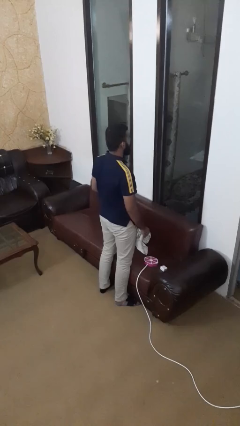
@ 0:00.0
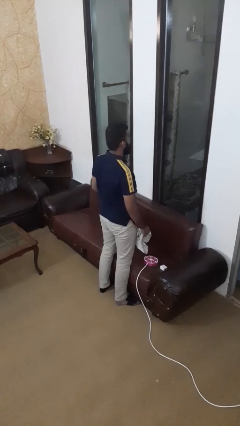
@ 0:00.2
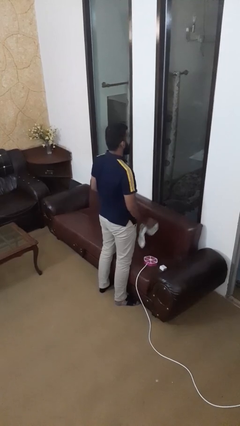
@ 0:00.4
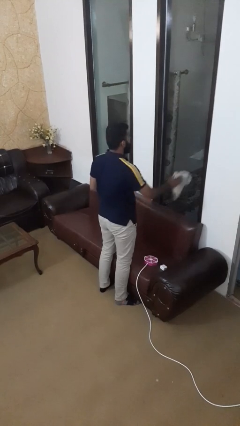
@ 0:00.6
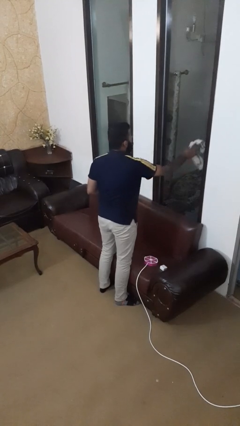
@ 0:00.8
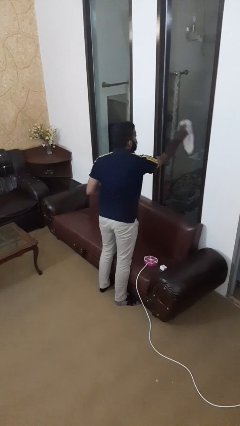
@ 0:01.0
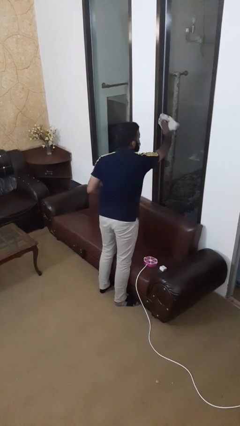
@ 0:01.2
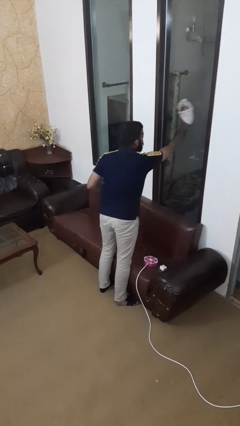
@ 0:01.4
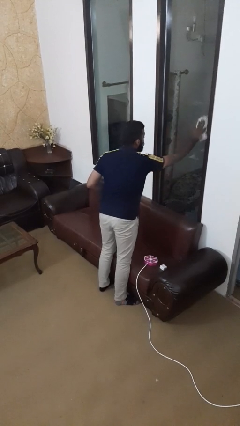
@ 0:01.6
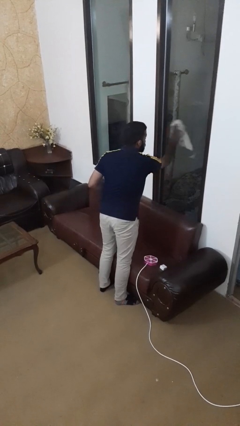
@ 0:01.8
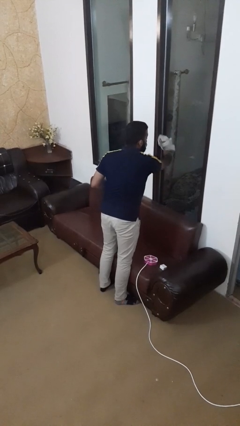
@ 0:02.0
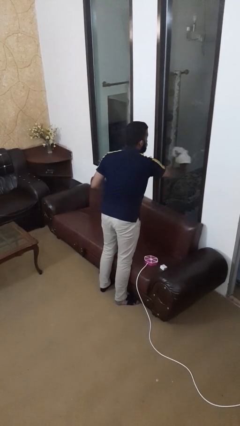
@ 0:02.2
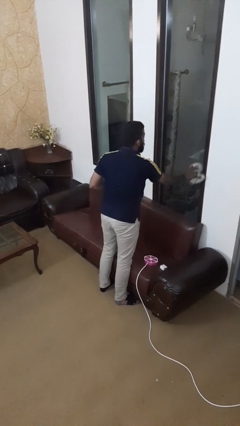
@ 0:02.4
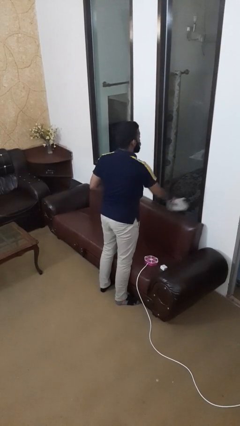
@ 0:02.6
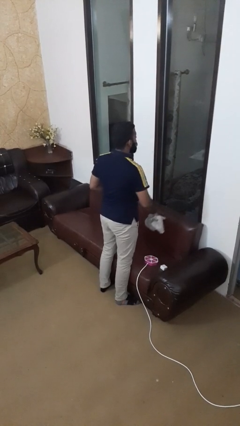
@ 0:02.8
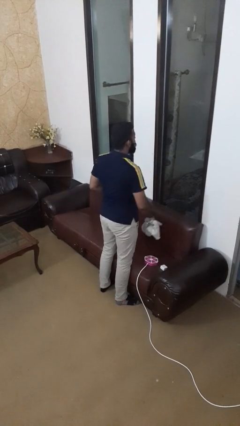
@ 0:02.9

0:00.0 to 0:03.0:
person washes window

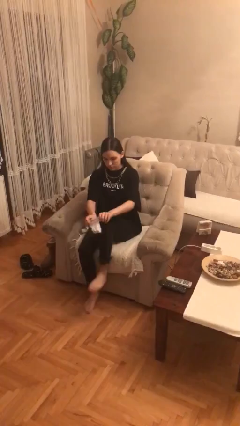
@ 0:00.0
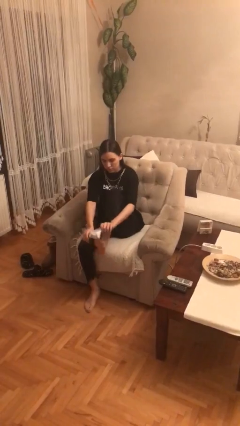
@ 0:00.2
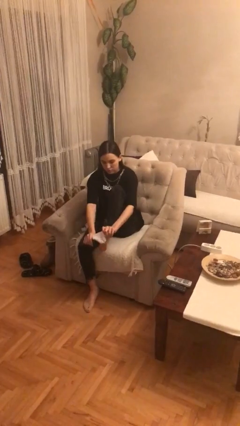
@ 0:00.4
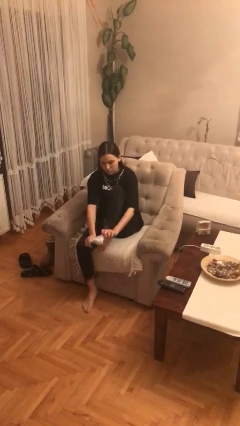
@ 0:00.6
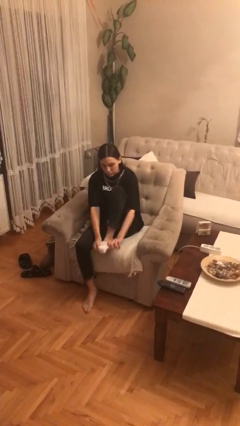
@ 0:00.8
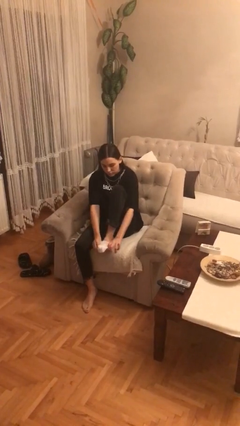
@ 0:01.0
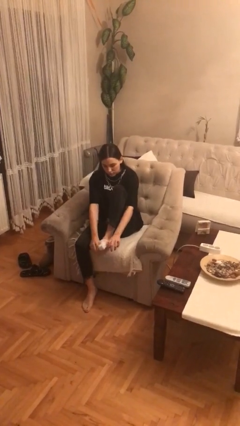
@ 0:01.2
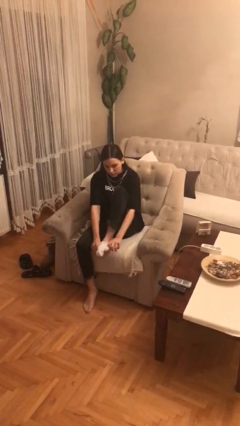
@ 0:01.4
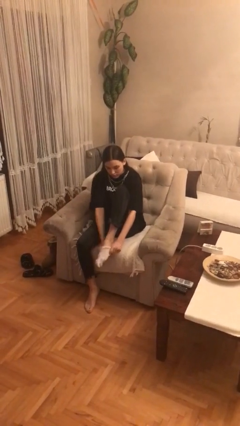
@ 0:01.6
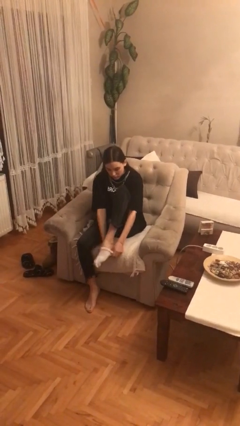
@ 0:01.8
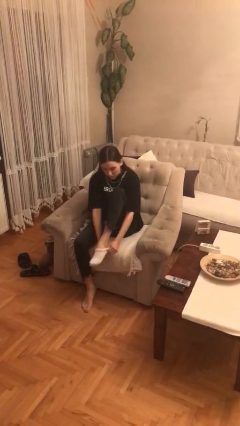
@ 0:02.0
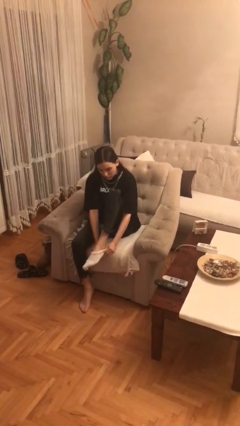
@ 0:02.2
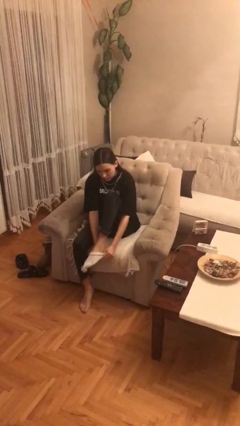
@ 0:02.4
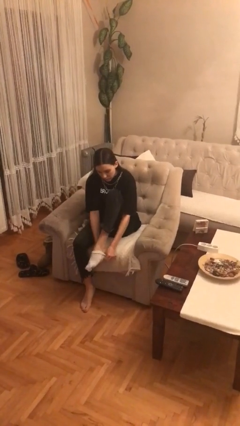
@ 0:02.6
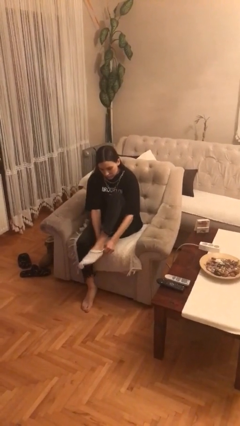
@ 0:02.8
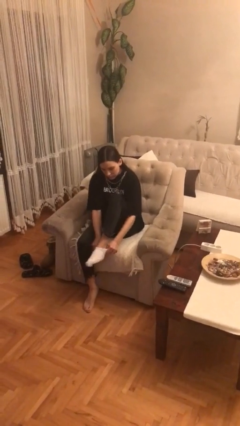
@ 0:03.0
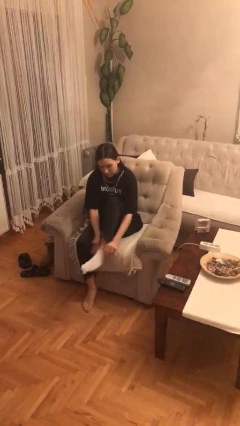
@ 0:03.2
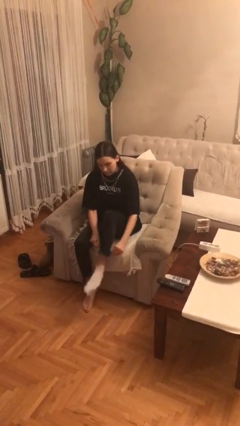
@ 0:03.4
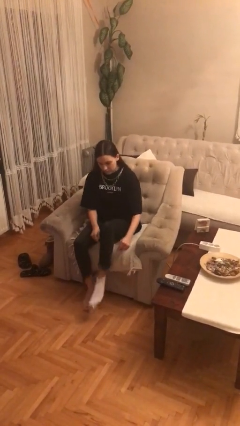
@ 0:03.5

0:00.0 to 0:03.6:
person puts on socks

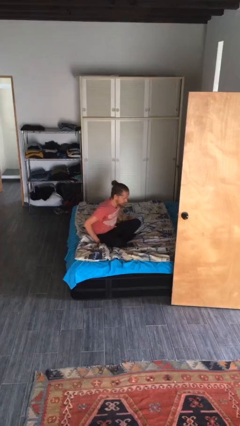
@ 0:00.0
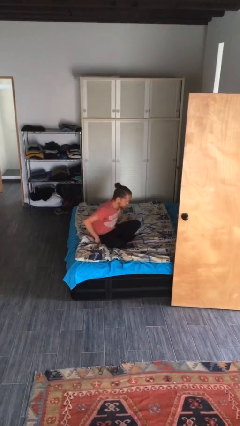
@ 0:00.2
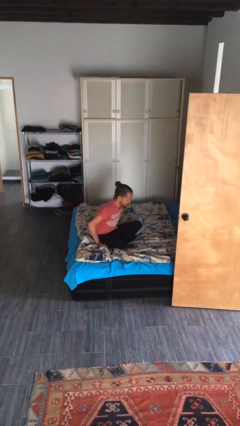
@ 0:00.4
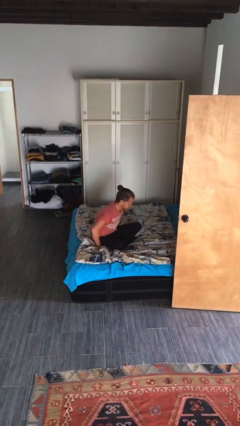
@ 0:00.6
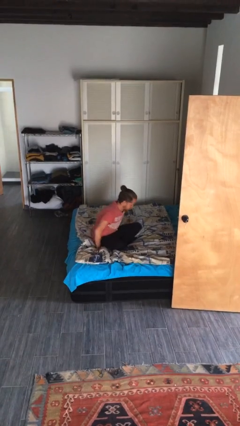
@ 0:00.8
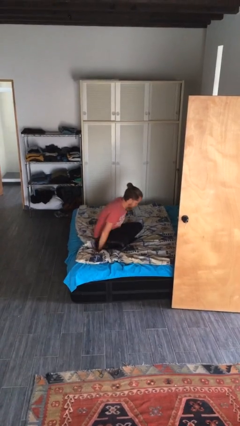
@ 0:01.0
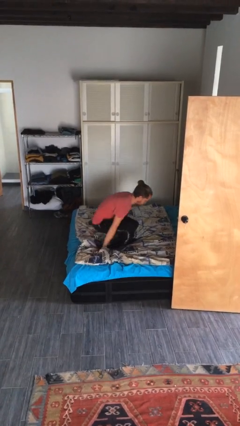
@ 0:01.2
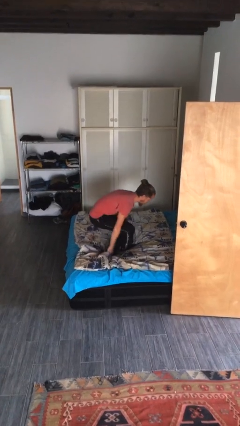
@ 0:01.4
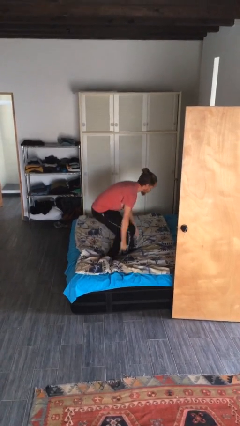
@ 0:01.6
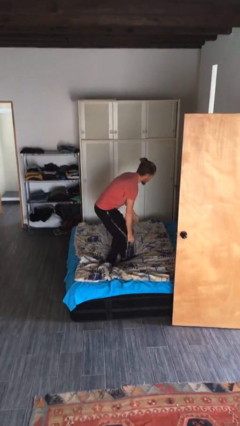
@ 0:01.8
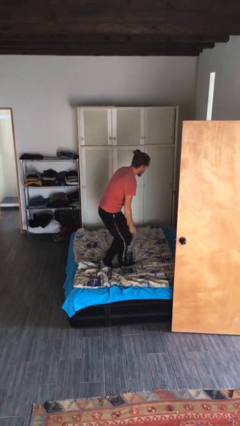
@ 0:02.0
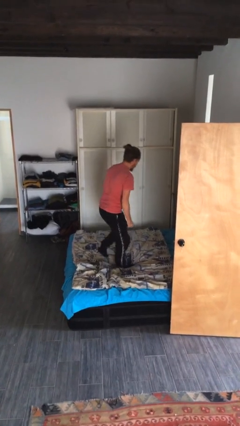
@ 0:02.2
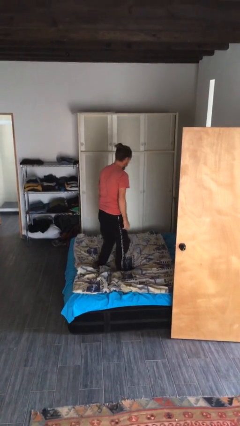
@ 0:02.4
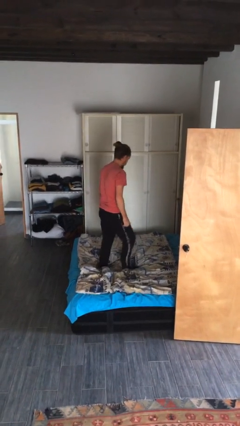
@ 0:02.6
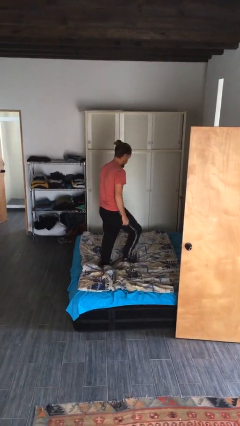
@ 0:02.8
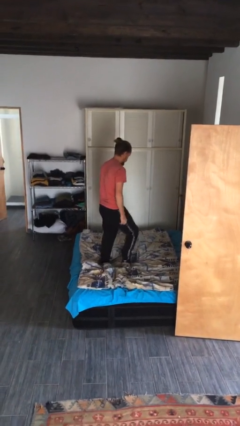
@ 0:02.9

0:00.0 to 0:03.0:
person stands up from floor

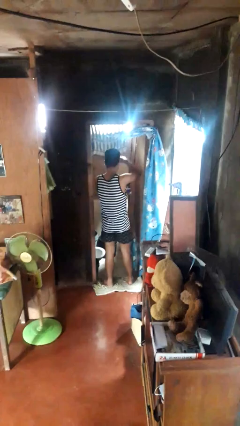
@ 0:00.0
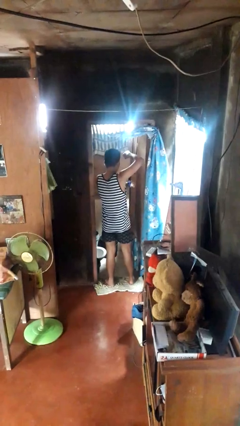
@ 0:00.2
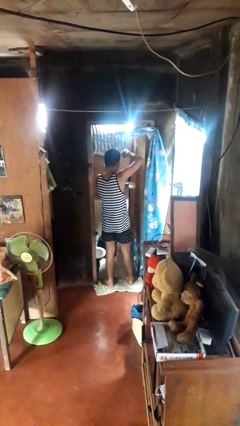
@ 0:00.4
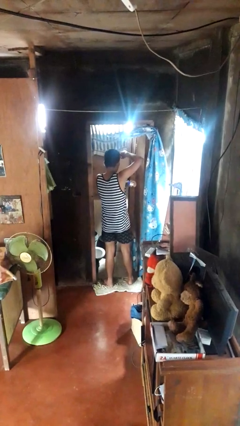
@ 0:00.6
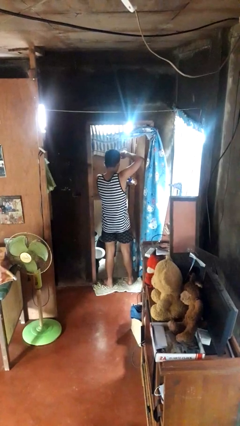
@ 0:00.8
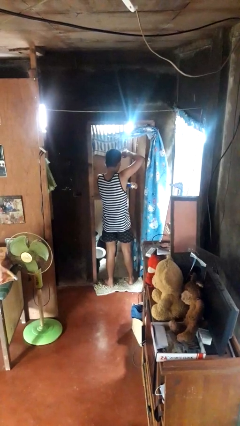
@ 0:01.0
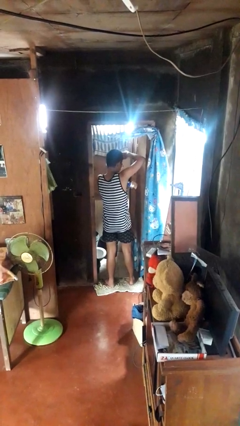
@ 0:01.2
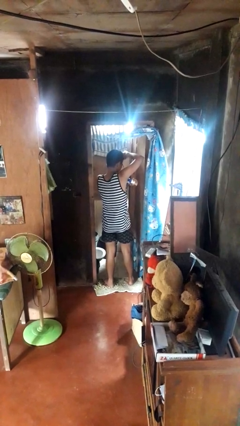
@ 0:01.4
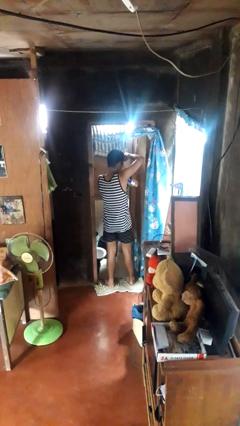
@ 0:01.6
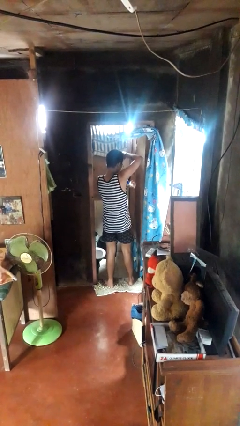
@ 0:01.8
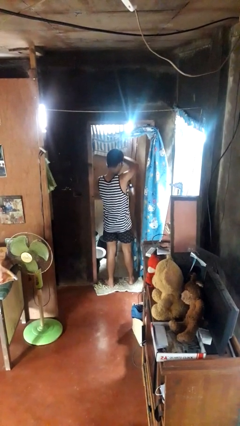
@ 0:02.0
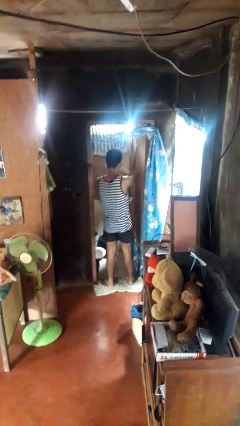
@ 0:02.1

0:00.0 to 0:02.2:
person applies deodorant

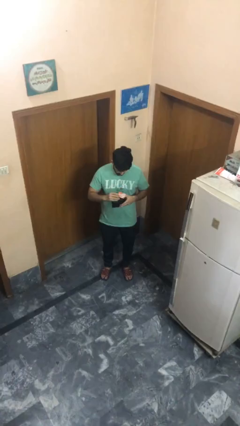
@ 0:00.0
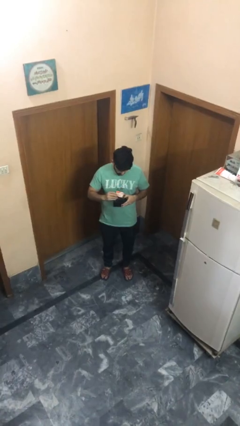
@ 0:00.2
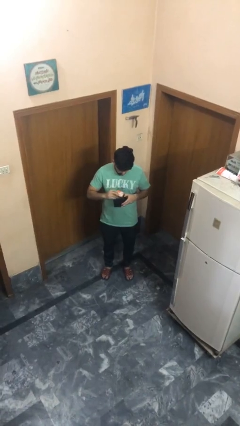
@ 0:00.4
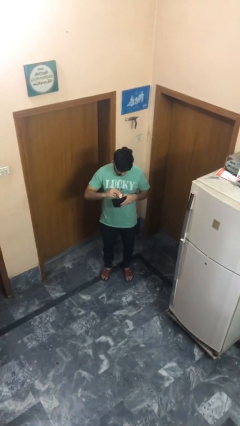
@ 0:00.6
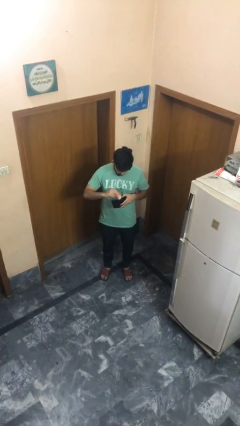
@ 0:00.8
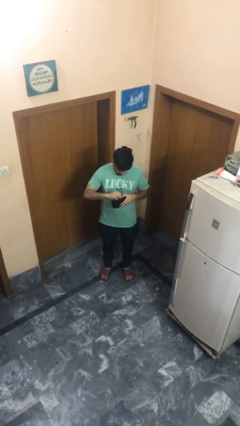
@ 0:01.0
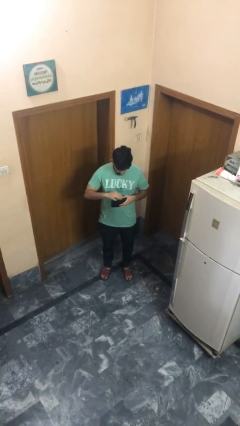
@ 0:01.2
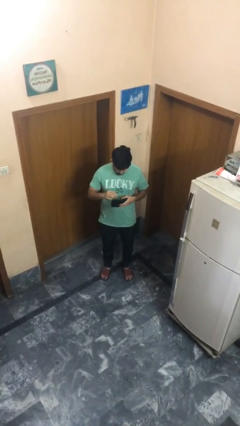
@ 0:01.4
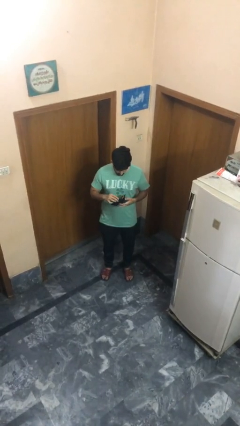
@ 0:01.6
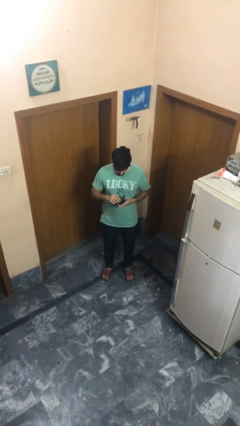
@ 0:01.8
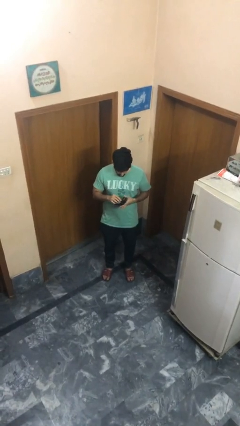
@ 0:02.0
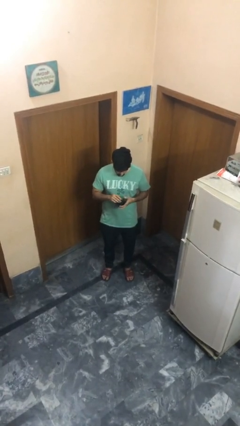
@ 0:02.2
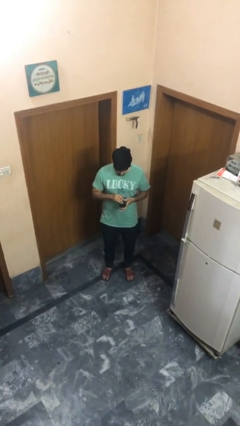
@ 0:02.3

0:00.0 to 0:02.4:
person puts object into purse

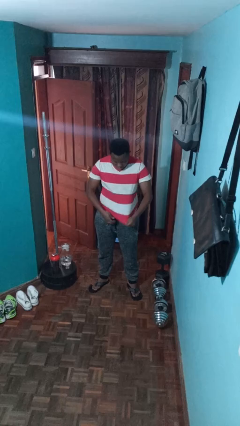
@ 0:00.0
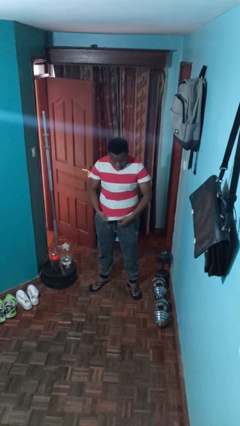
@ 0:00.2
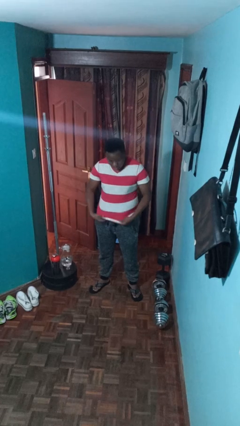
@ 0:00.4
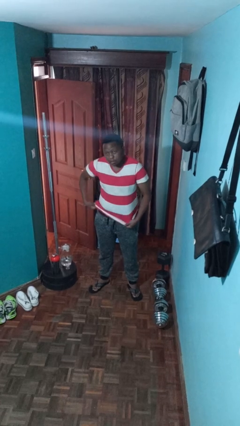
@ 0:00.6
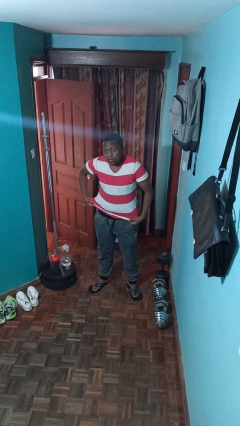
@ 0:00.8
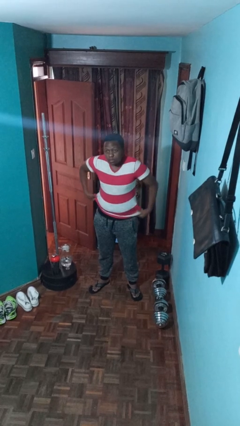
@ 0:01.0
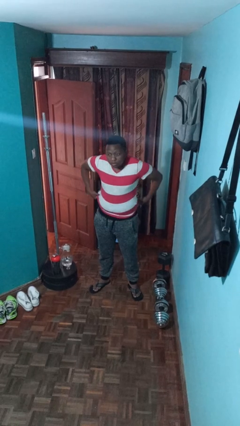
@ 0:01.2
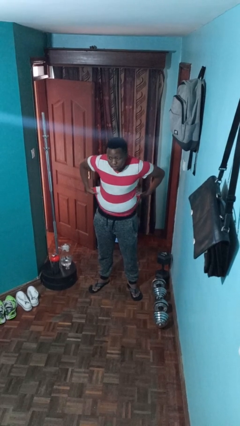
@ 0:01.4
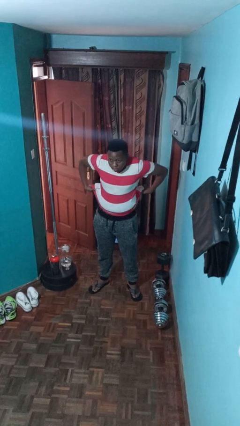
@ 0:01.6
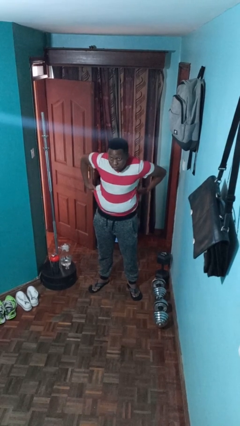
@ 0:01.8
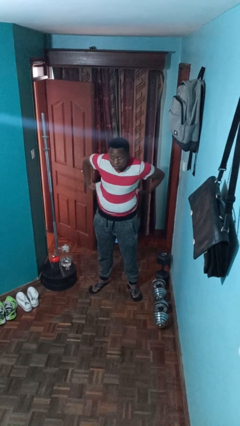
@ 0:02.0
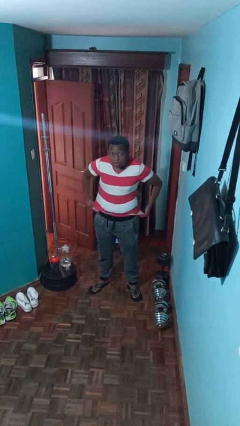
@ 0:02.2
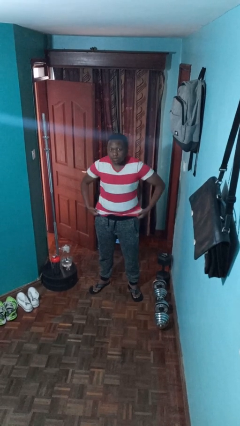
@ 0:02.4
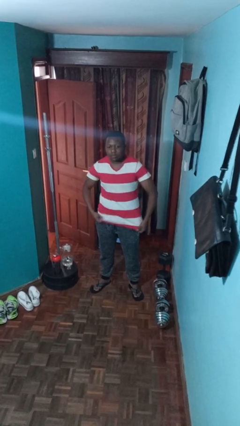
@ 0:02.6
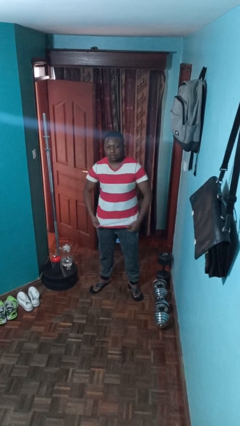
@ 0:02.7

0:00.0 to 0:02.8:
person untucks shirt

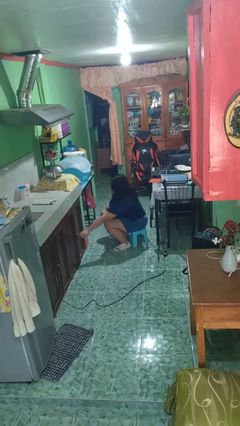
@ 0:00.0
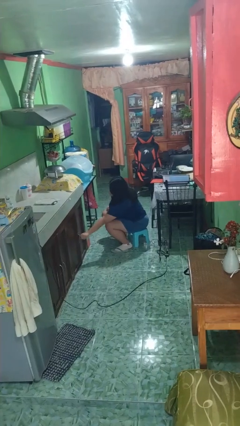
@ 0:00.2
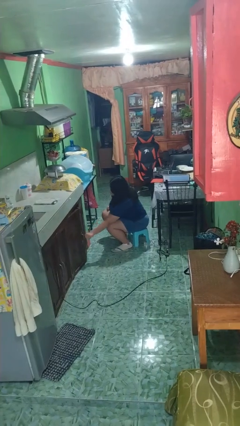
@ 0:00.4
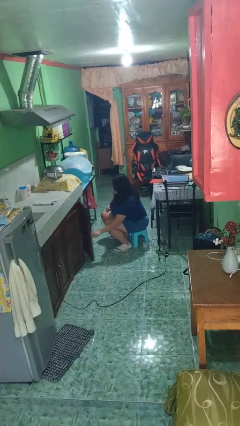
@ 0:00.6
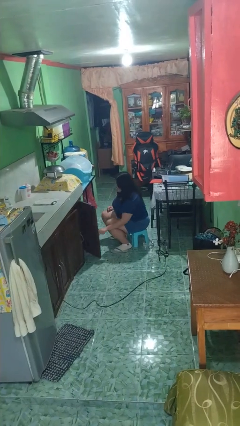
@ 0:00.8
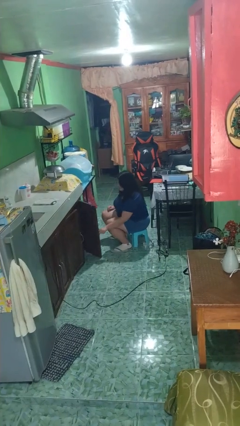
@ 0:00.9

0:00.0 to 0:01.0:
person opens cabinet
